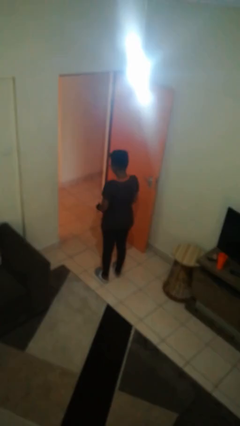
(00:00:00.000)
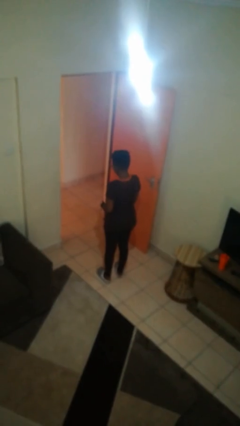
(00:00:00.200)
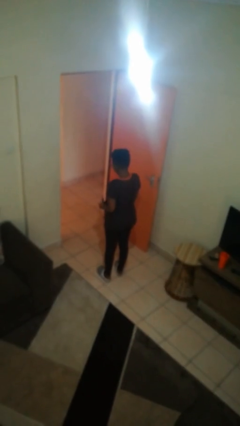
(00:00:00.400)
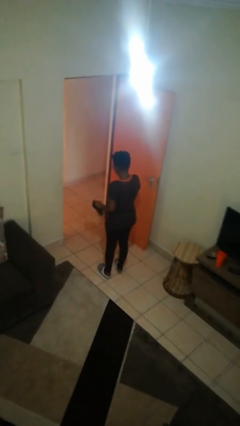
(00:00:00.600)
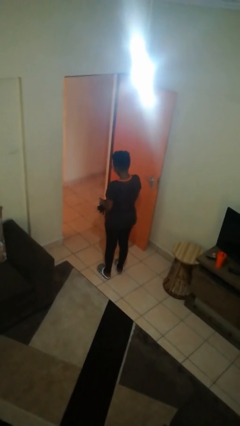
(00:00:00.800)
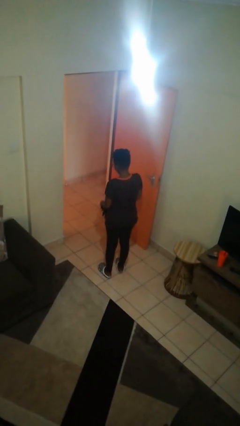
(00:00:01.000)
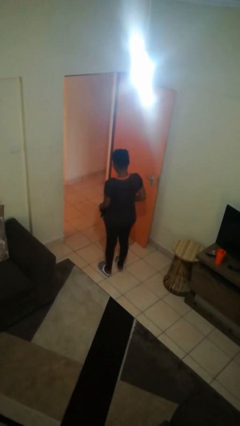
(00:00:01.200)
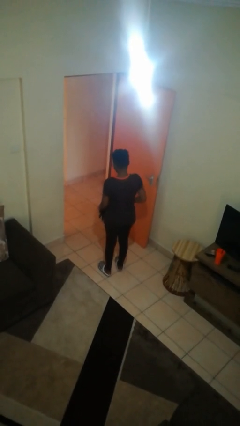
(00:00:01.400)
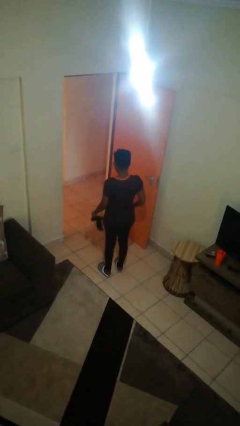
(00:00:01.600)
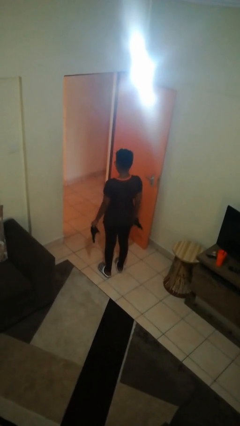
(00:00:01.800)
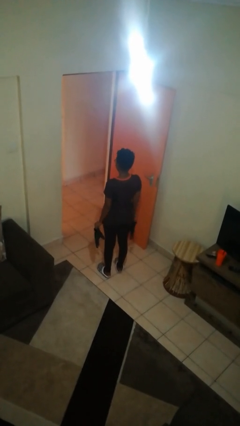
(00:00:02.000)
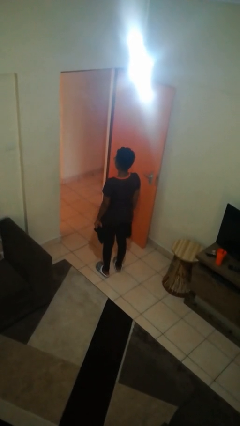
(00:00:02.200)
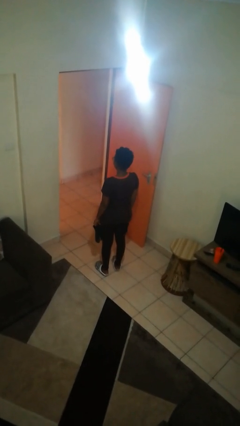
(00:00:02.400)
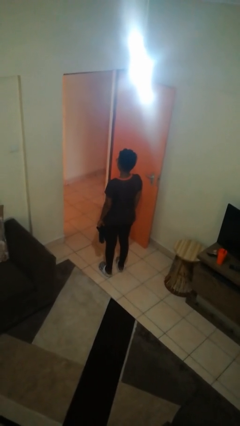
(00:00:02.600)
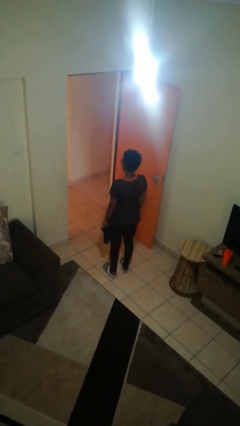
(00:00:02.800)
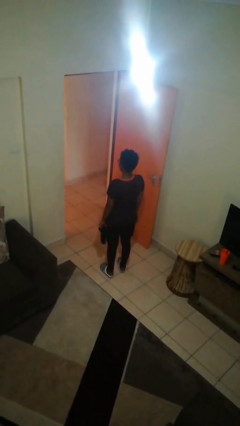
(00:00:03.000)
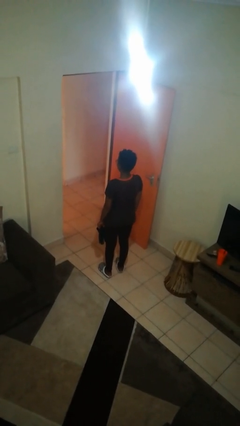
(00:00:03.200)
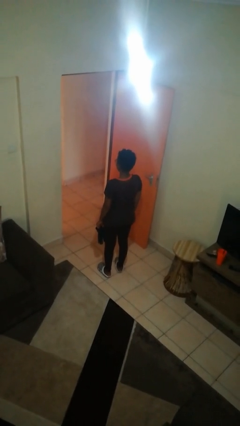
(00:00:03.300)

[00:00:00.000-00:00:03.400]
person takes off gloves

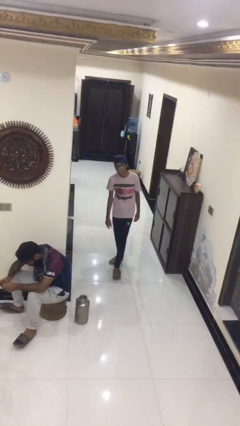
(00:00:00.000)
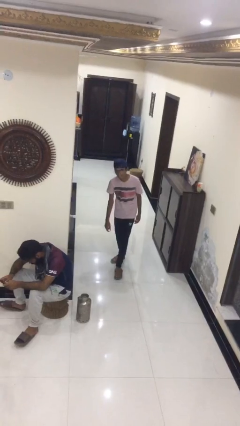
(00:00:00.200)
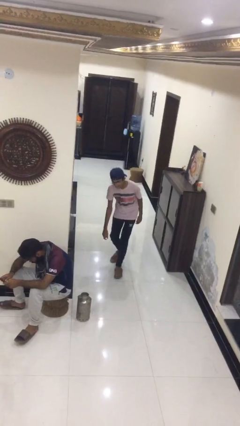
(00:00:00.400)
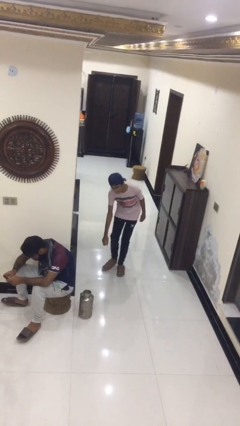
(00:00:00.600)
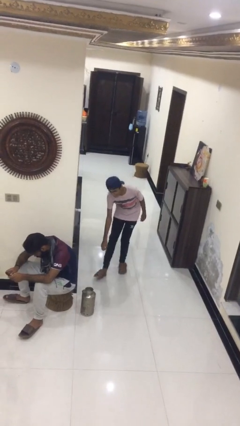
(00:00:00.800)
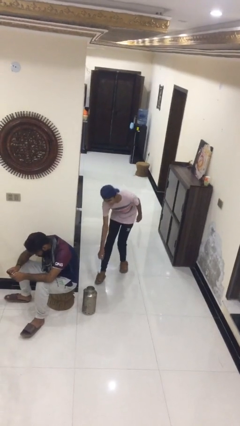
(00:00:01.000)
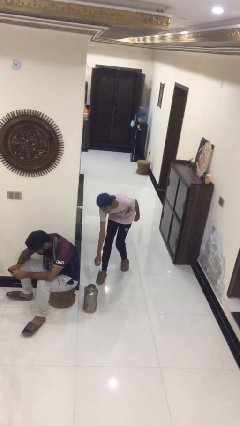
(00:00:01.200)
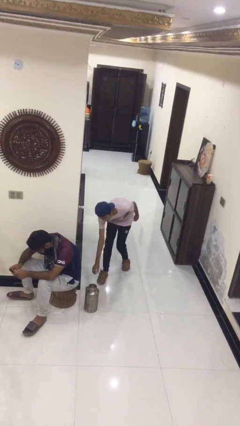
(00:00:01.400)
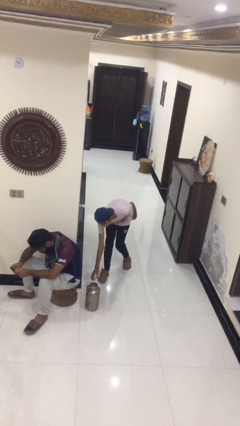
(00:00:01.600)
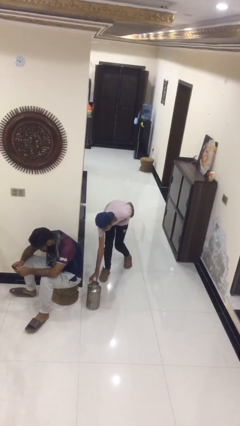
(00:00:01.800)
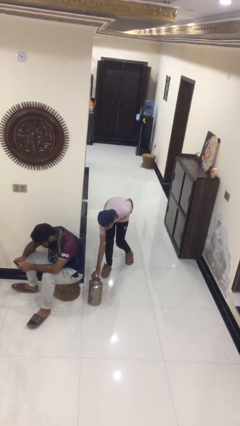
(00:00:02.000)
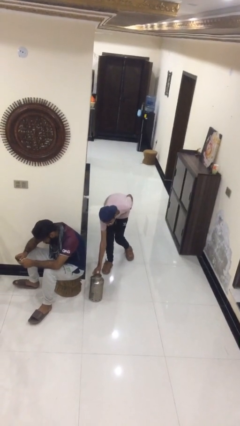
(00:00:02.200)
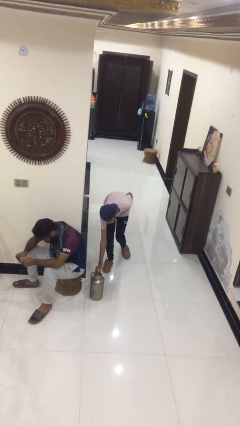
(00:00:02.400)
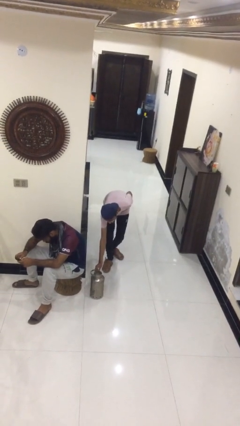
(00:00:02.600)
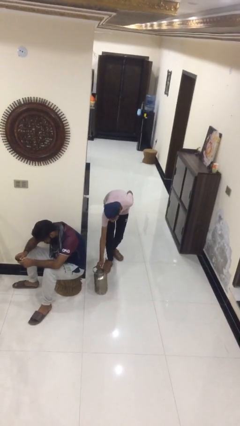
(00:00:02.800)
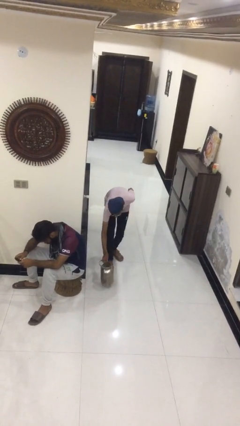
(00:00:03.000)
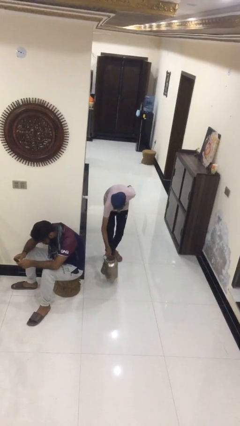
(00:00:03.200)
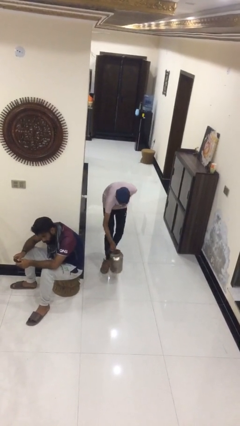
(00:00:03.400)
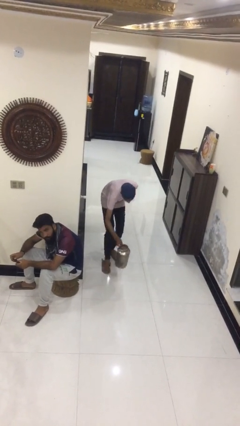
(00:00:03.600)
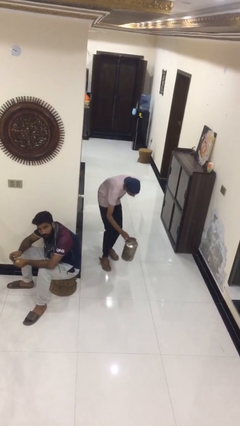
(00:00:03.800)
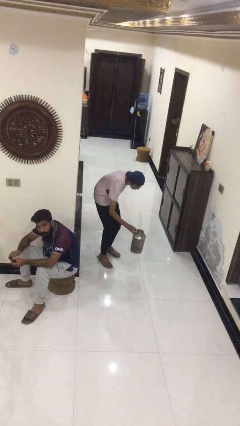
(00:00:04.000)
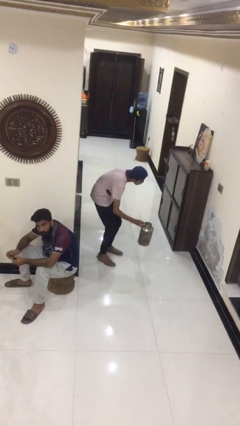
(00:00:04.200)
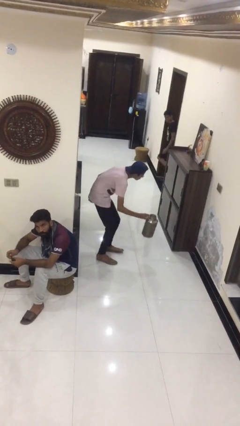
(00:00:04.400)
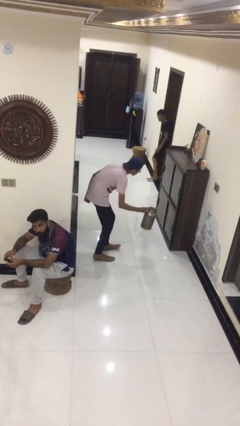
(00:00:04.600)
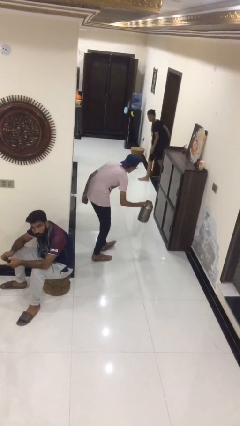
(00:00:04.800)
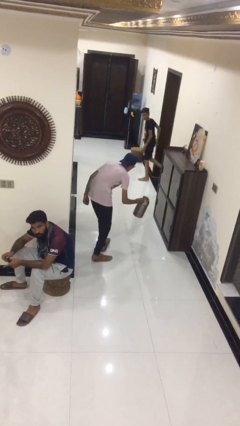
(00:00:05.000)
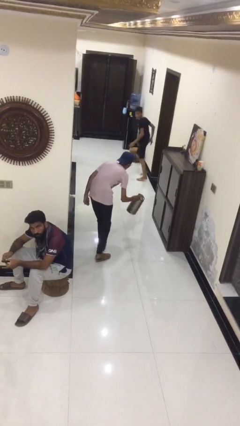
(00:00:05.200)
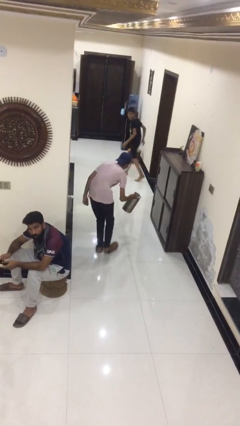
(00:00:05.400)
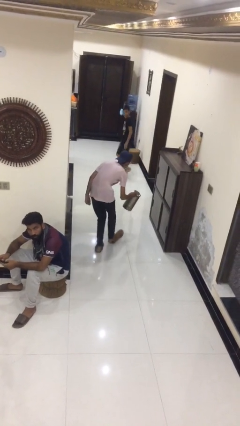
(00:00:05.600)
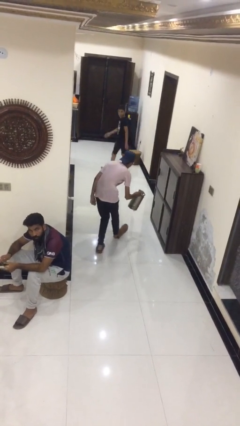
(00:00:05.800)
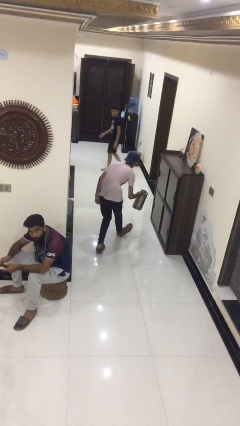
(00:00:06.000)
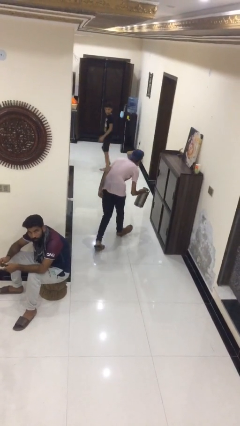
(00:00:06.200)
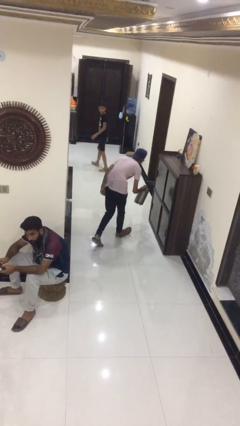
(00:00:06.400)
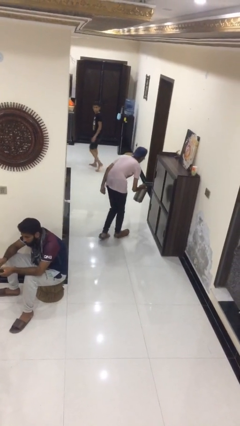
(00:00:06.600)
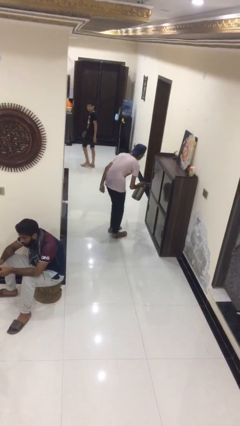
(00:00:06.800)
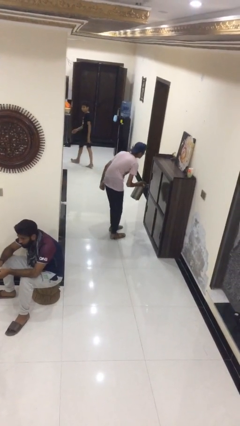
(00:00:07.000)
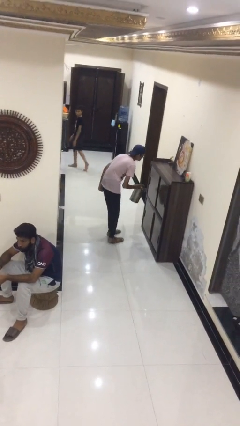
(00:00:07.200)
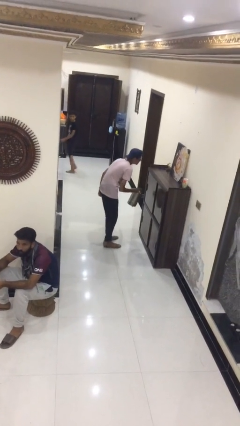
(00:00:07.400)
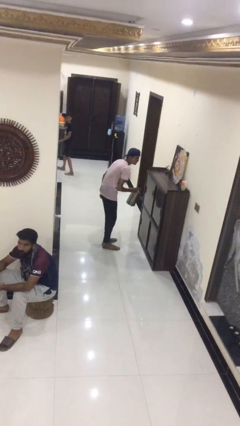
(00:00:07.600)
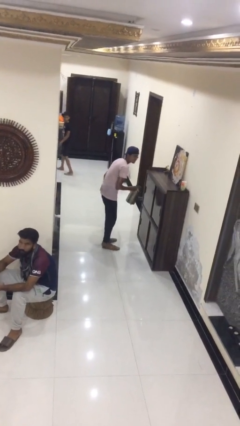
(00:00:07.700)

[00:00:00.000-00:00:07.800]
person steals object from person

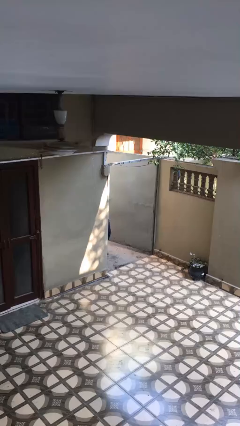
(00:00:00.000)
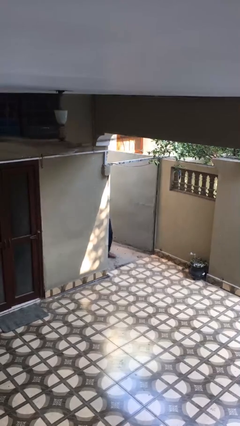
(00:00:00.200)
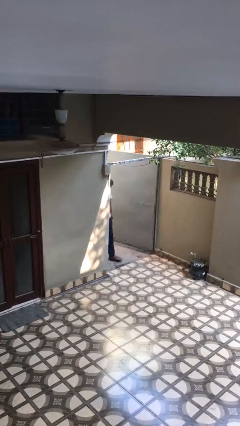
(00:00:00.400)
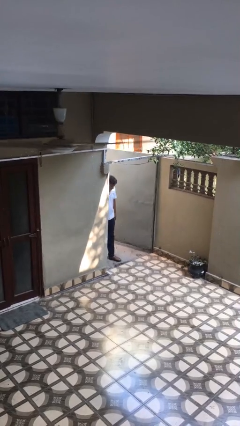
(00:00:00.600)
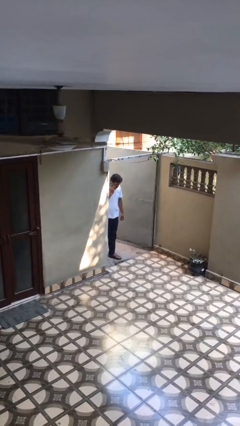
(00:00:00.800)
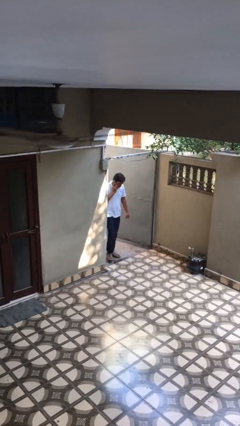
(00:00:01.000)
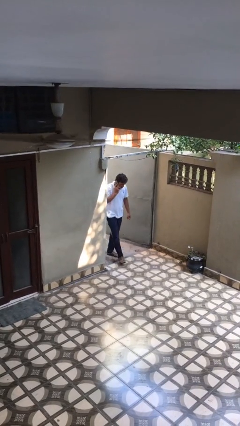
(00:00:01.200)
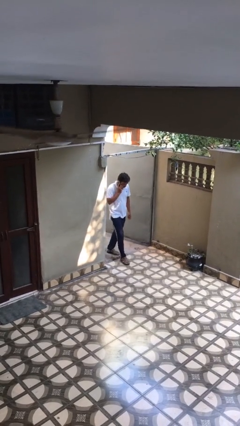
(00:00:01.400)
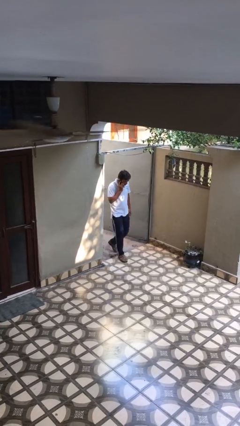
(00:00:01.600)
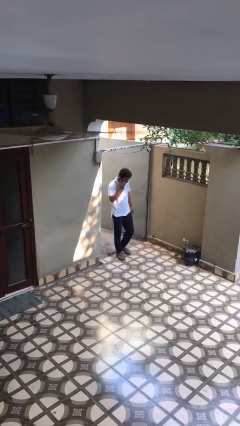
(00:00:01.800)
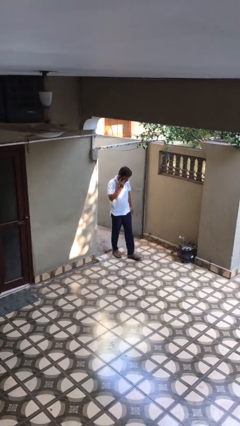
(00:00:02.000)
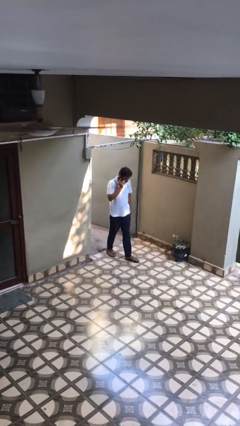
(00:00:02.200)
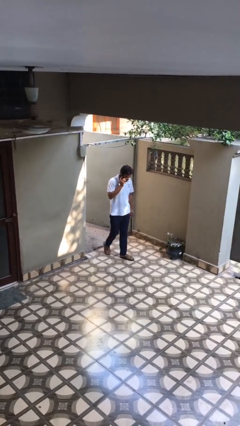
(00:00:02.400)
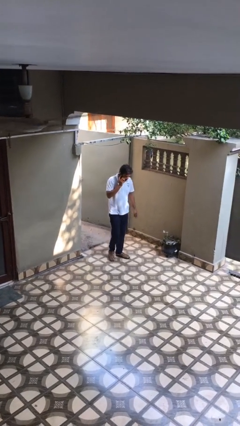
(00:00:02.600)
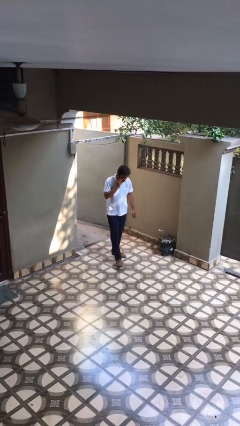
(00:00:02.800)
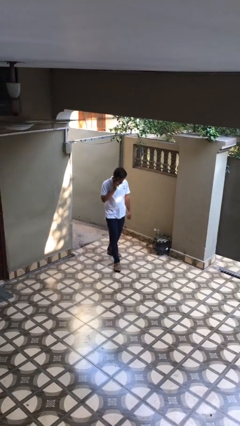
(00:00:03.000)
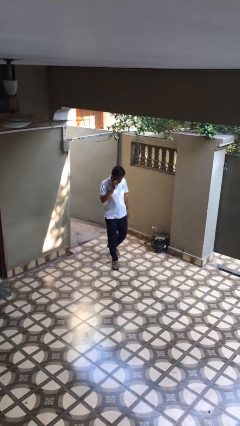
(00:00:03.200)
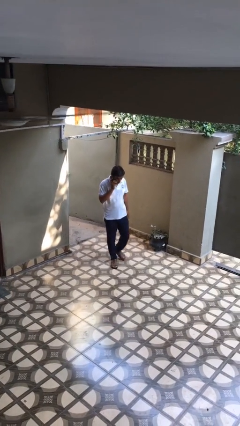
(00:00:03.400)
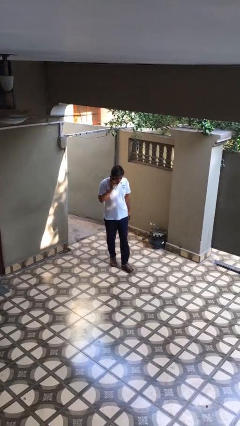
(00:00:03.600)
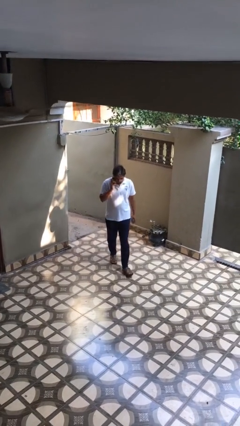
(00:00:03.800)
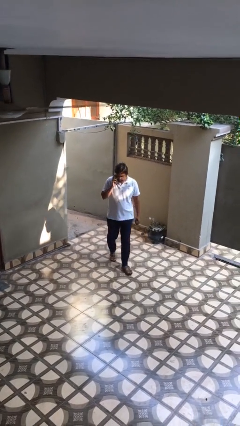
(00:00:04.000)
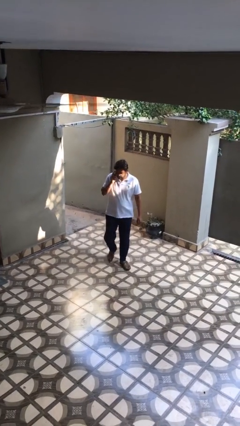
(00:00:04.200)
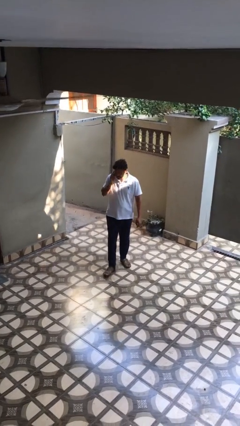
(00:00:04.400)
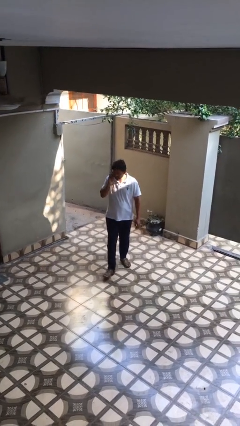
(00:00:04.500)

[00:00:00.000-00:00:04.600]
person enters scene through structure

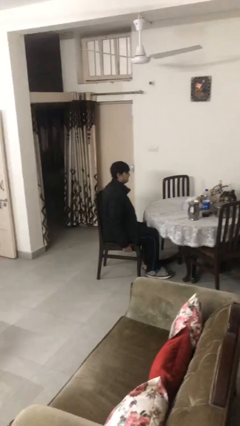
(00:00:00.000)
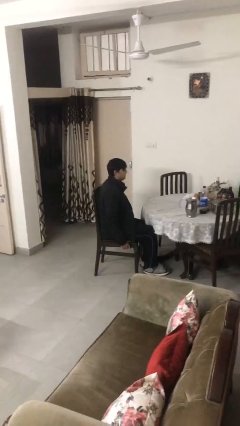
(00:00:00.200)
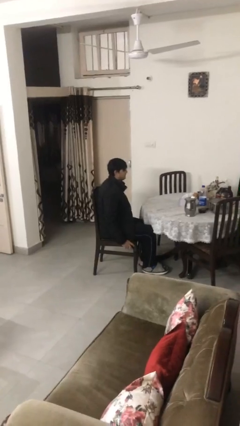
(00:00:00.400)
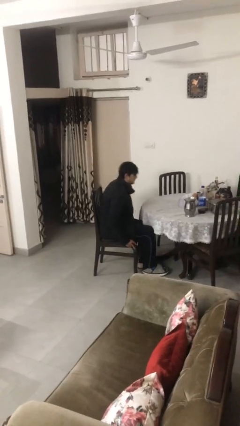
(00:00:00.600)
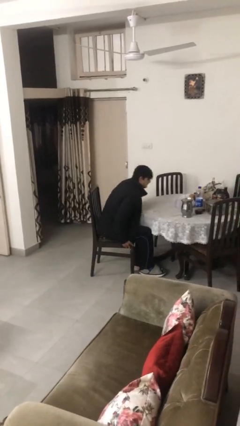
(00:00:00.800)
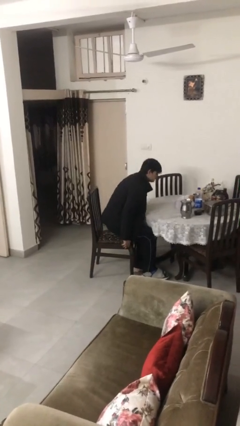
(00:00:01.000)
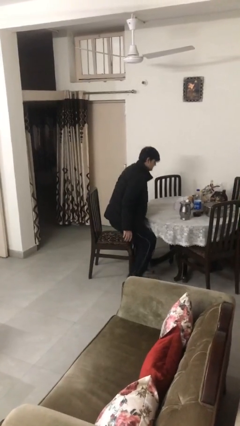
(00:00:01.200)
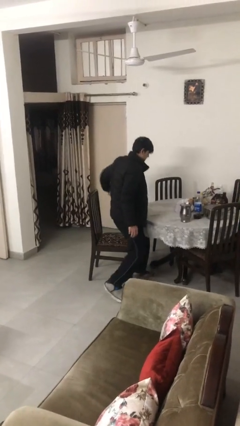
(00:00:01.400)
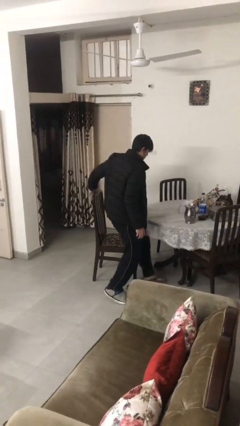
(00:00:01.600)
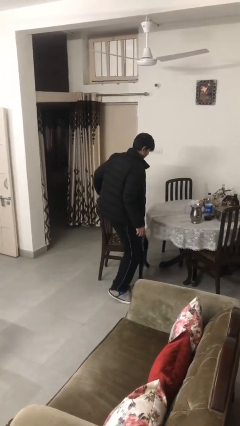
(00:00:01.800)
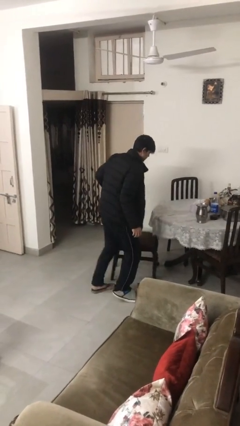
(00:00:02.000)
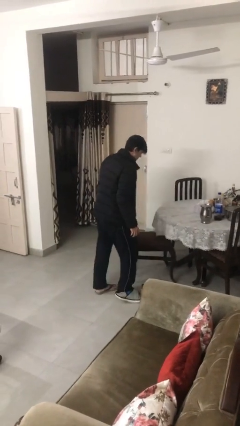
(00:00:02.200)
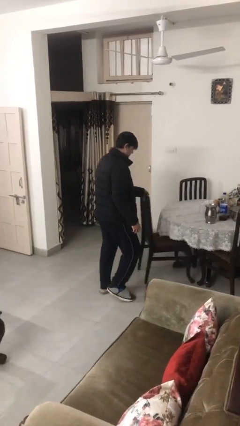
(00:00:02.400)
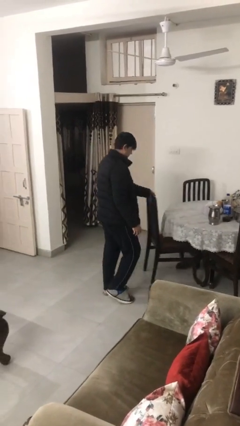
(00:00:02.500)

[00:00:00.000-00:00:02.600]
person stands up
